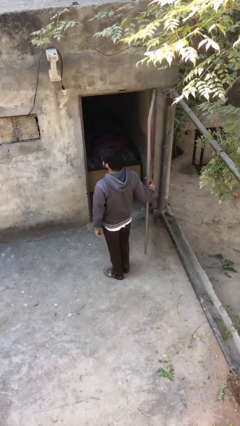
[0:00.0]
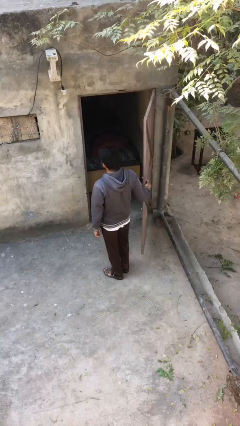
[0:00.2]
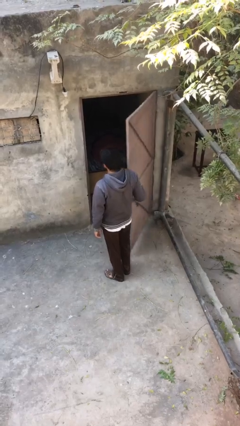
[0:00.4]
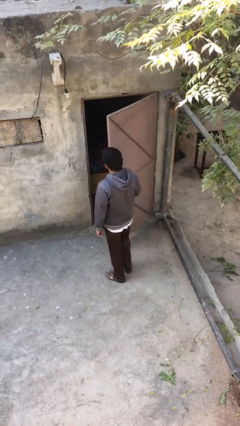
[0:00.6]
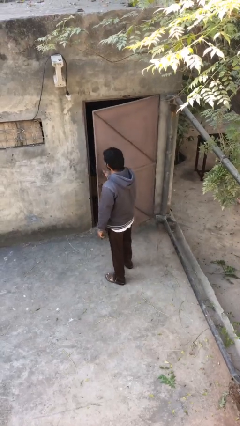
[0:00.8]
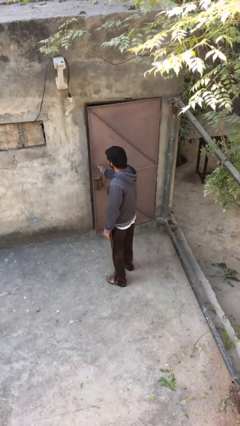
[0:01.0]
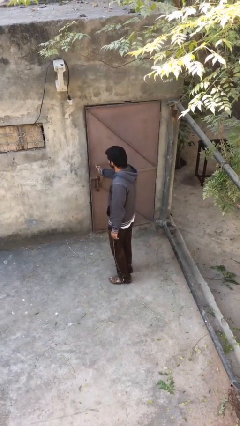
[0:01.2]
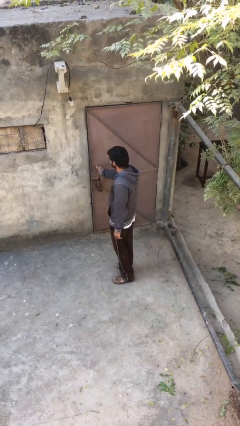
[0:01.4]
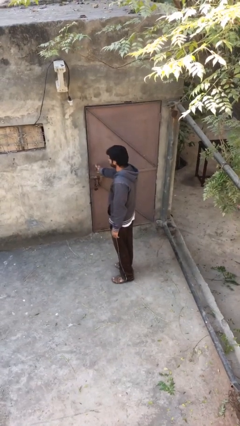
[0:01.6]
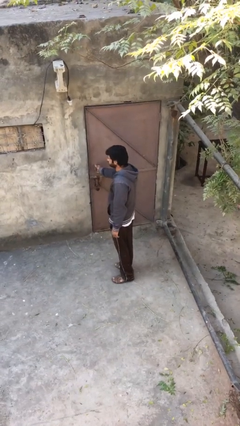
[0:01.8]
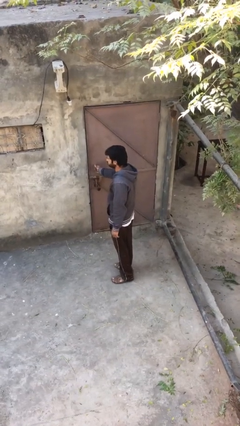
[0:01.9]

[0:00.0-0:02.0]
person closes facility door

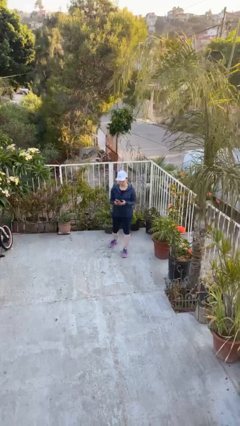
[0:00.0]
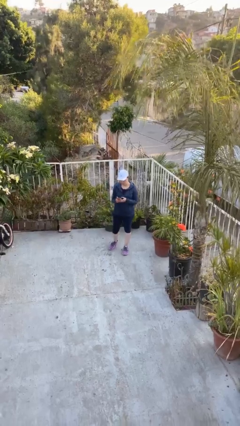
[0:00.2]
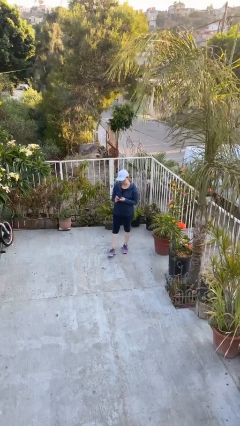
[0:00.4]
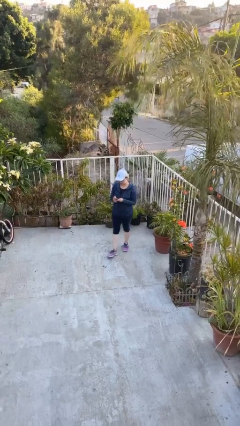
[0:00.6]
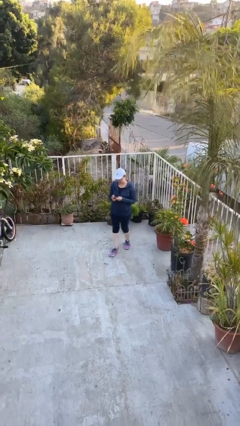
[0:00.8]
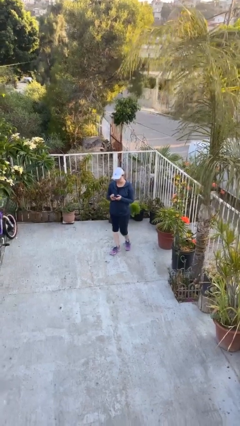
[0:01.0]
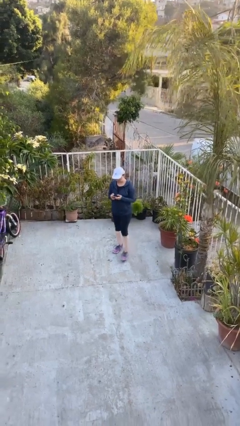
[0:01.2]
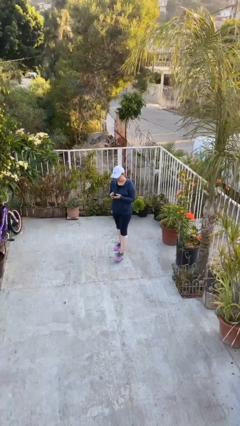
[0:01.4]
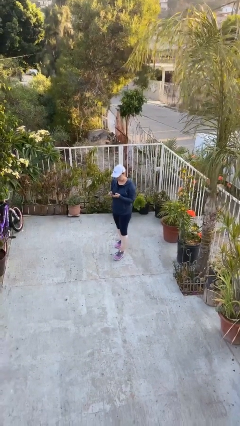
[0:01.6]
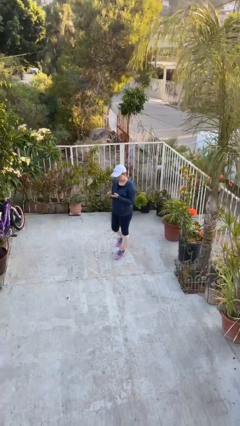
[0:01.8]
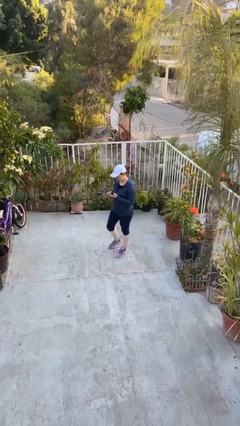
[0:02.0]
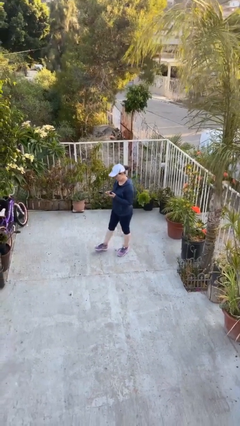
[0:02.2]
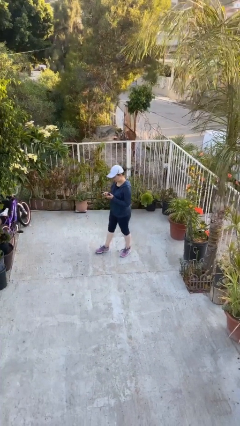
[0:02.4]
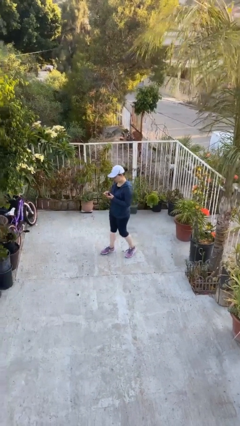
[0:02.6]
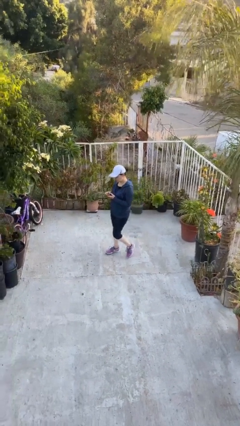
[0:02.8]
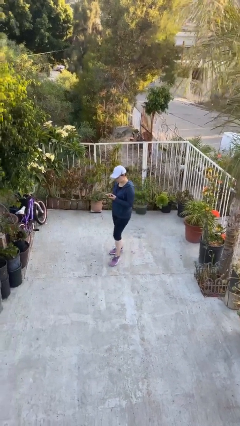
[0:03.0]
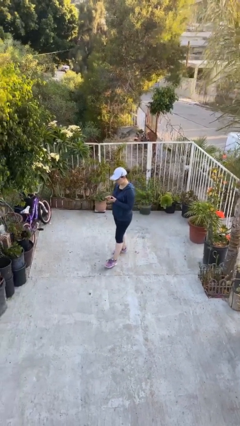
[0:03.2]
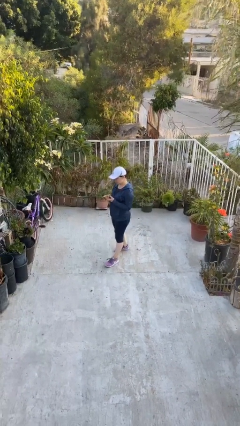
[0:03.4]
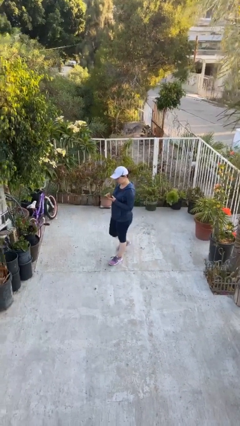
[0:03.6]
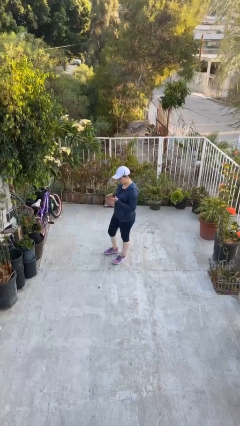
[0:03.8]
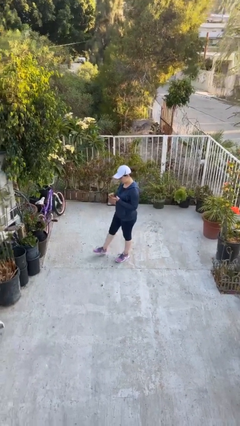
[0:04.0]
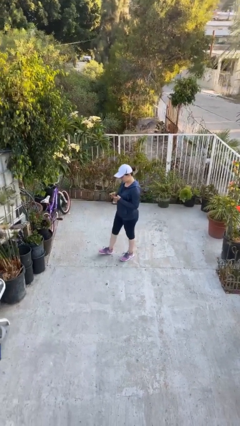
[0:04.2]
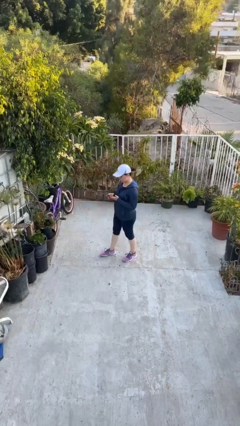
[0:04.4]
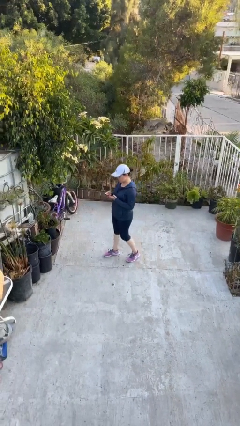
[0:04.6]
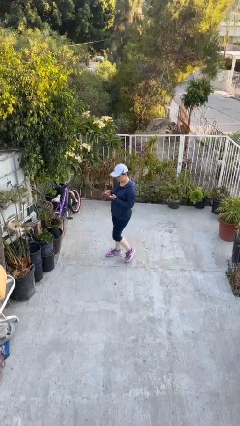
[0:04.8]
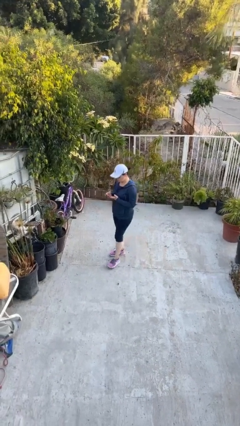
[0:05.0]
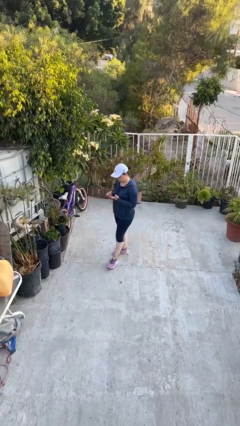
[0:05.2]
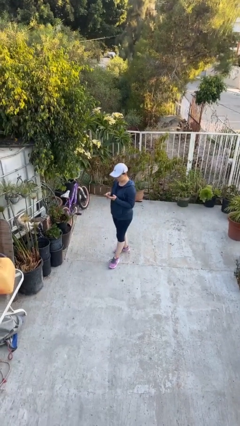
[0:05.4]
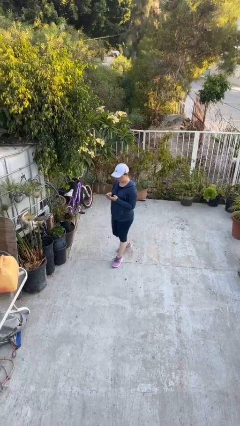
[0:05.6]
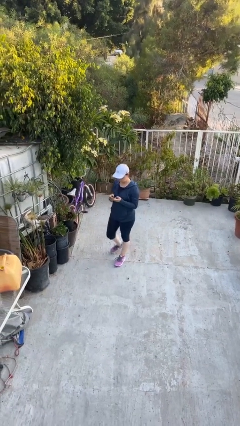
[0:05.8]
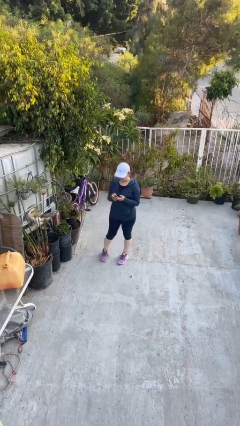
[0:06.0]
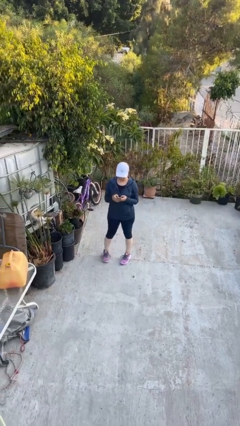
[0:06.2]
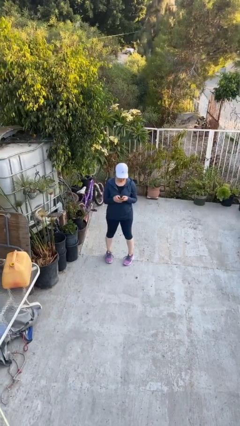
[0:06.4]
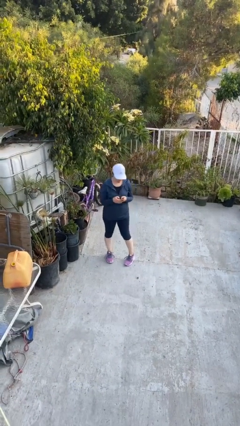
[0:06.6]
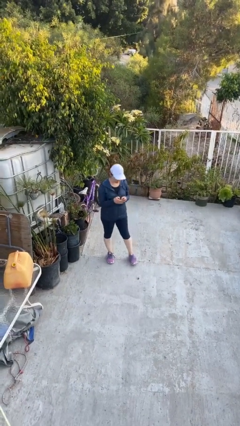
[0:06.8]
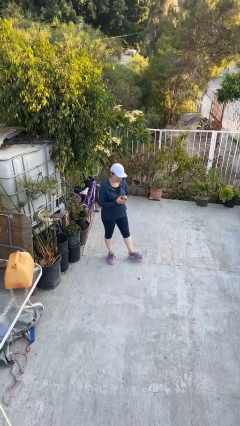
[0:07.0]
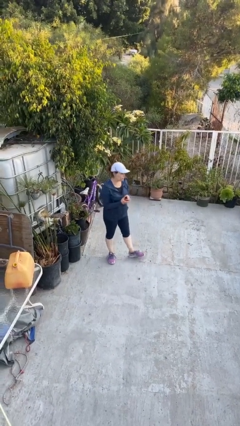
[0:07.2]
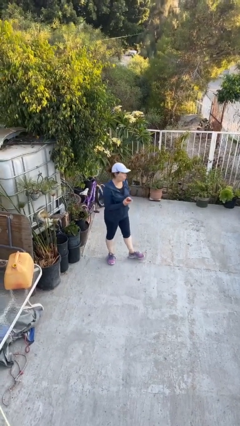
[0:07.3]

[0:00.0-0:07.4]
person texts on phone

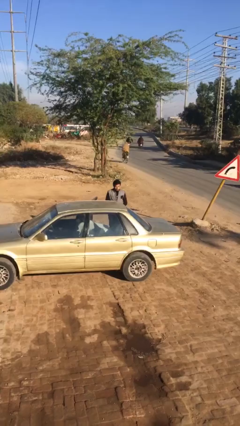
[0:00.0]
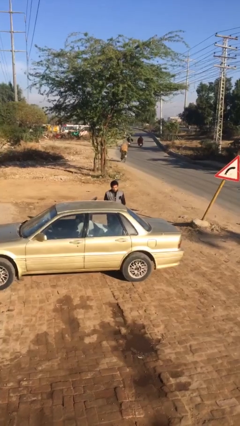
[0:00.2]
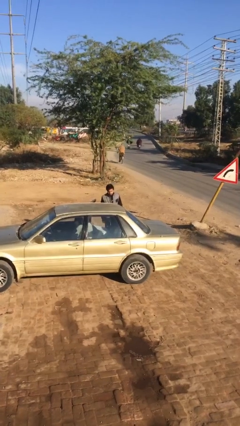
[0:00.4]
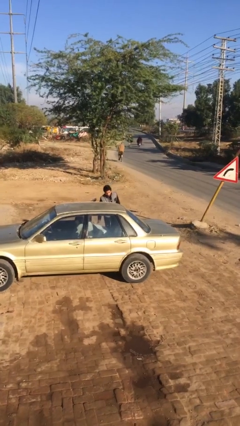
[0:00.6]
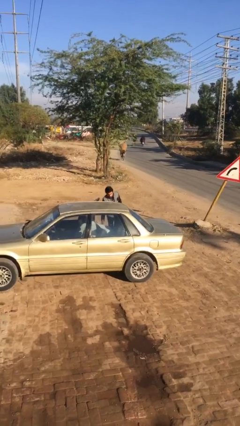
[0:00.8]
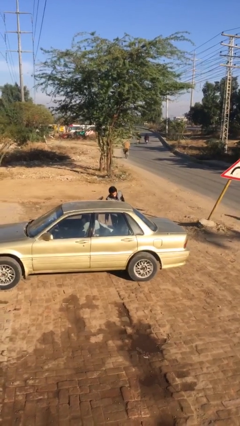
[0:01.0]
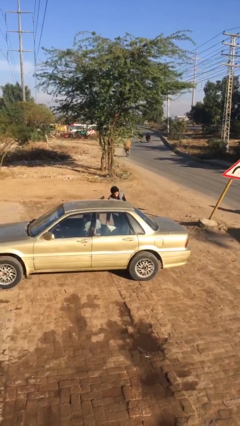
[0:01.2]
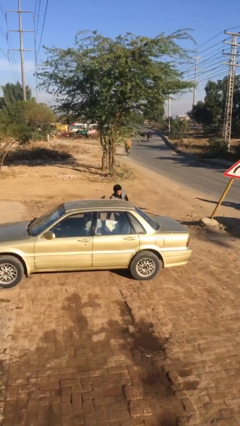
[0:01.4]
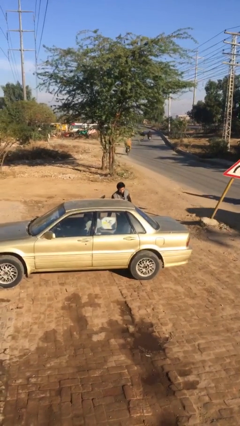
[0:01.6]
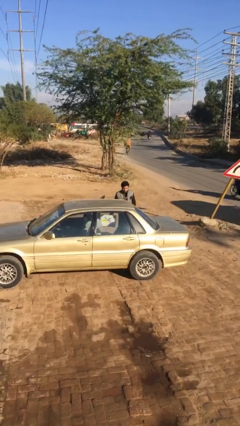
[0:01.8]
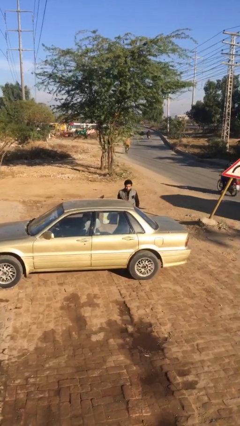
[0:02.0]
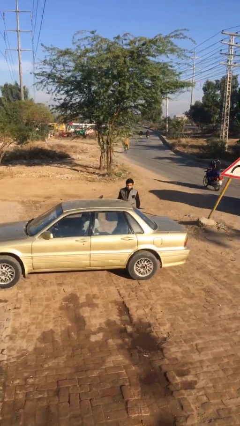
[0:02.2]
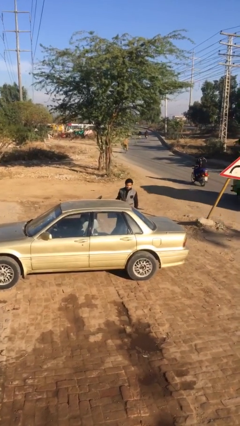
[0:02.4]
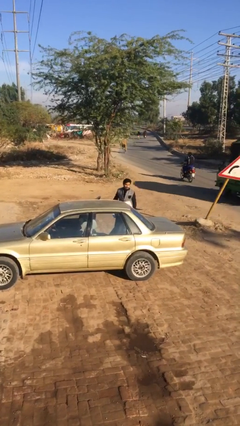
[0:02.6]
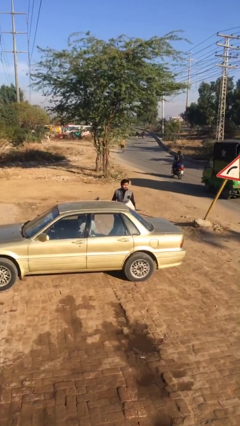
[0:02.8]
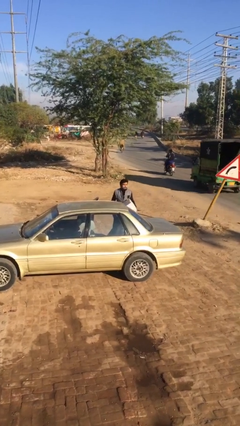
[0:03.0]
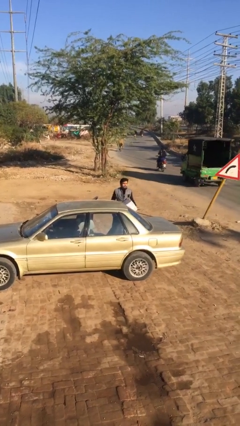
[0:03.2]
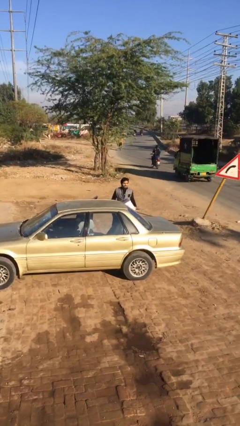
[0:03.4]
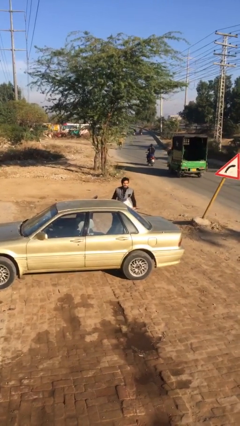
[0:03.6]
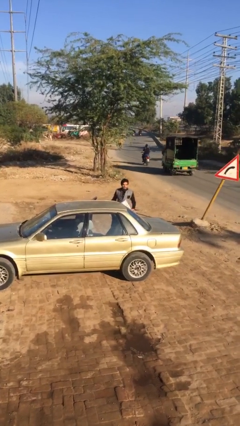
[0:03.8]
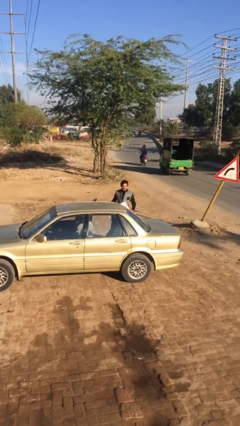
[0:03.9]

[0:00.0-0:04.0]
person unloads car

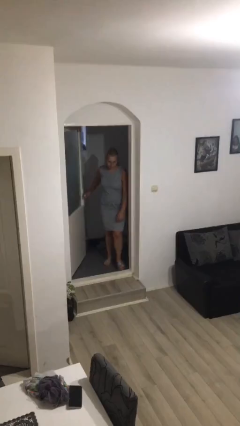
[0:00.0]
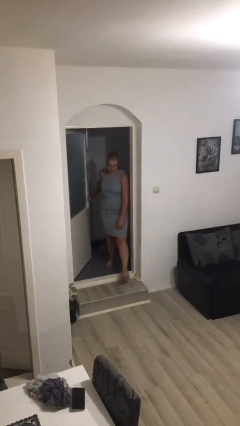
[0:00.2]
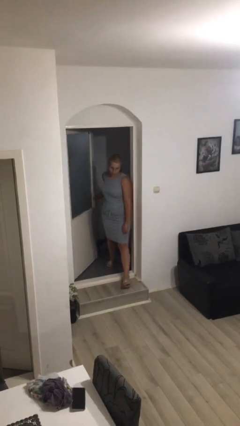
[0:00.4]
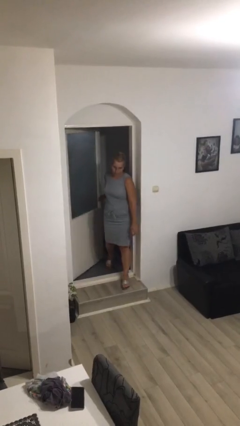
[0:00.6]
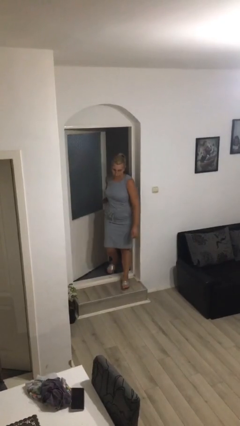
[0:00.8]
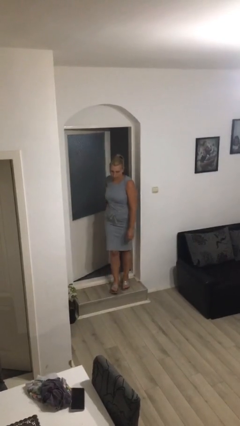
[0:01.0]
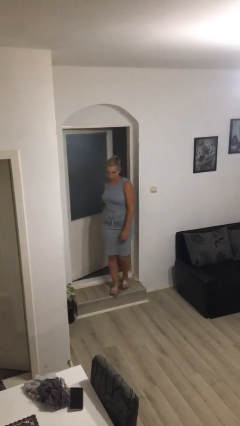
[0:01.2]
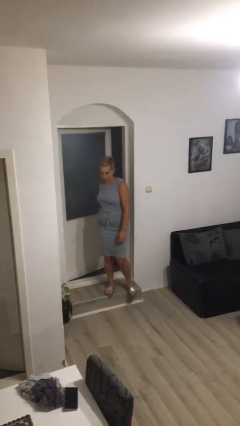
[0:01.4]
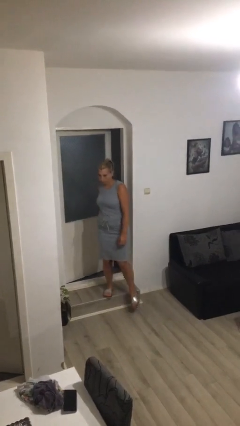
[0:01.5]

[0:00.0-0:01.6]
person enters scene through structure

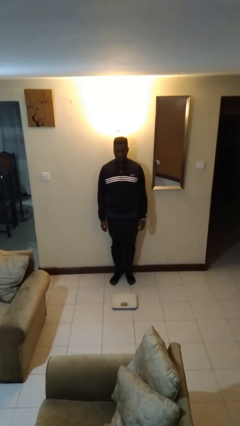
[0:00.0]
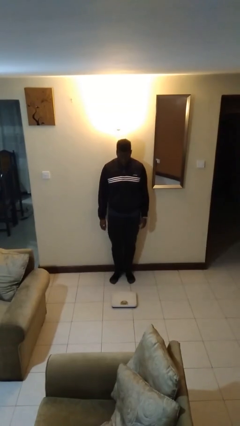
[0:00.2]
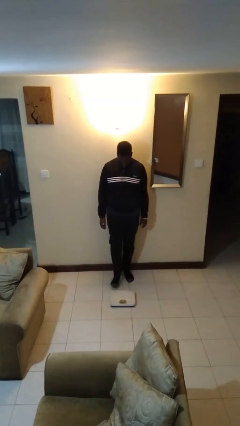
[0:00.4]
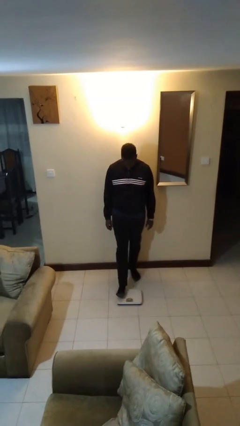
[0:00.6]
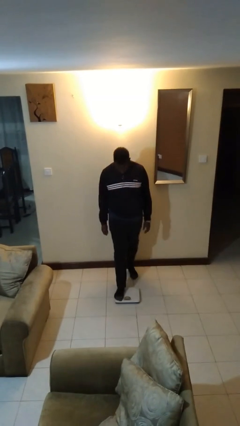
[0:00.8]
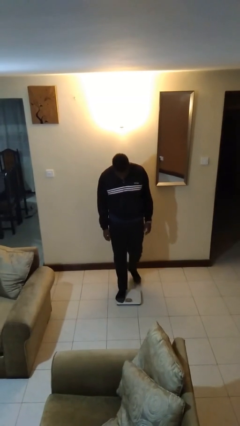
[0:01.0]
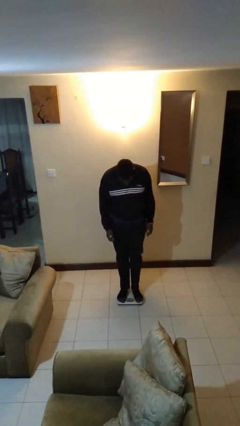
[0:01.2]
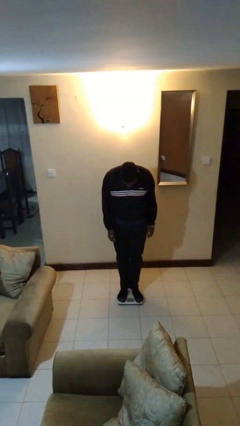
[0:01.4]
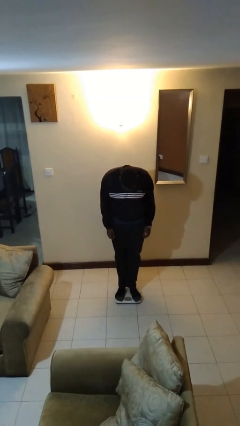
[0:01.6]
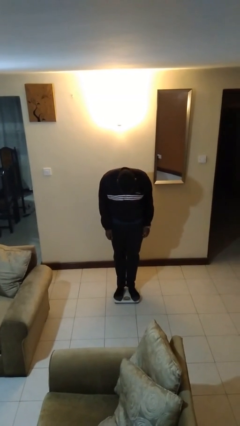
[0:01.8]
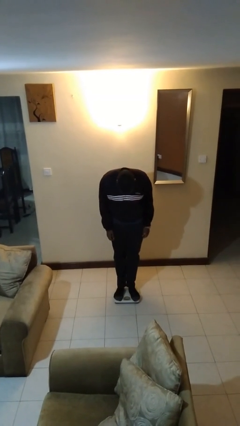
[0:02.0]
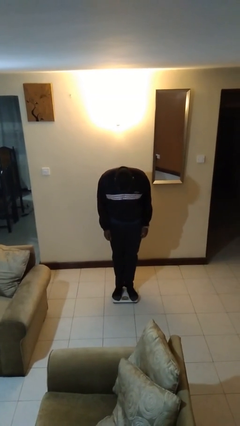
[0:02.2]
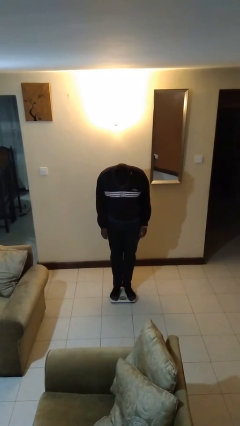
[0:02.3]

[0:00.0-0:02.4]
person uses bodyweight scale
